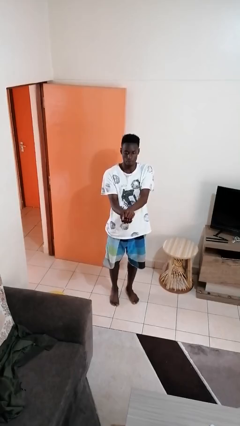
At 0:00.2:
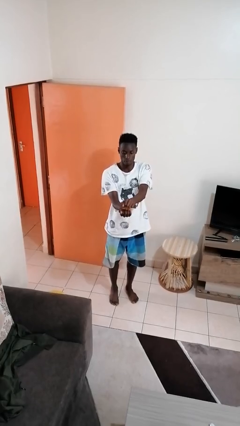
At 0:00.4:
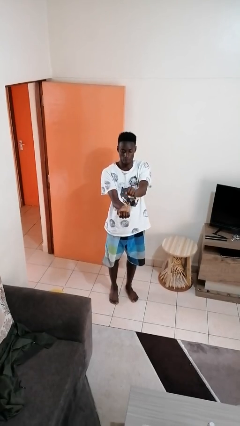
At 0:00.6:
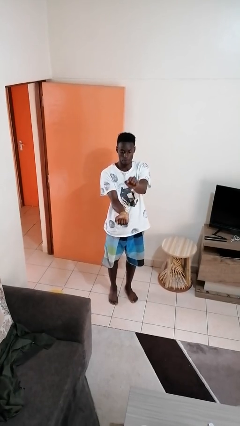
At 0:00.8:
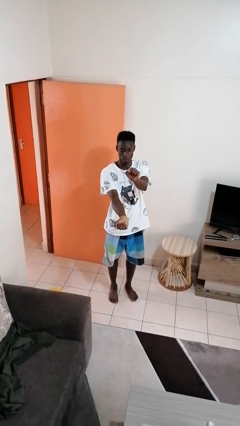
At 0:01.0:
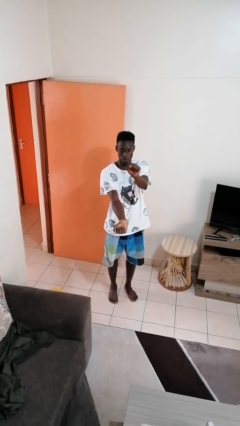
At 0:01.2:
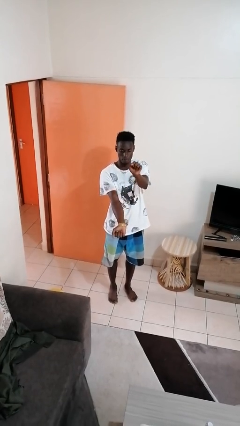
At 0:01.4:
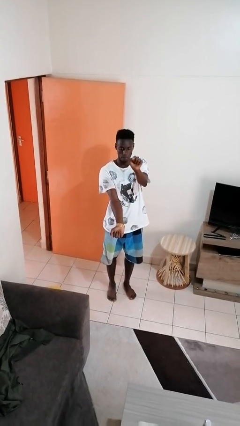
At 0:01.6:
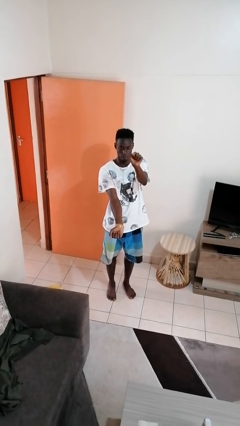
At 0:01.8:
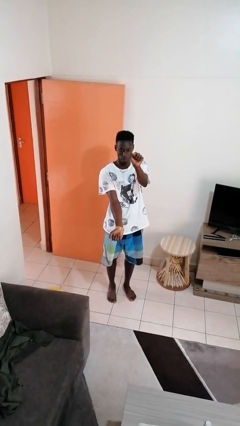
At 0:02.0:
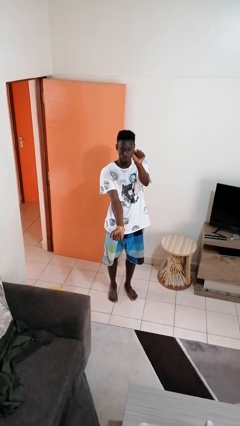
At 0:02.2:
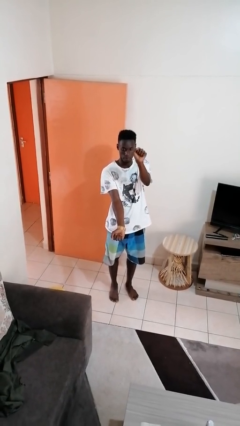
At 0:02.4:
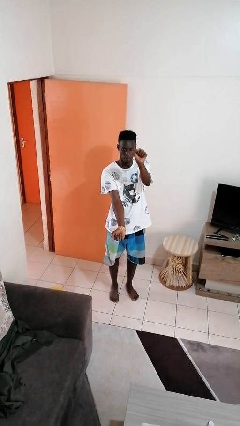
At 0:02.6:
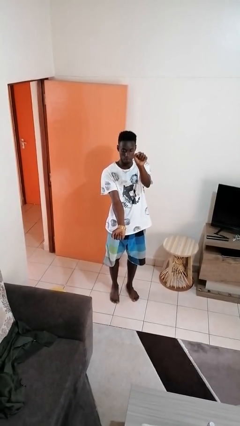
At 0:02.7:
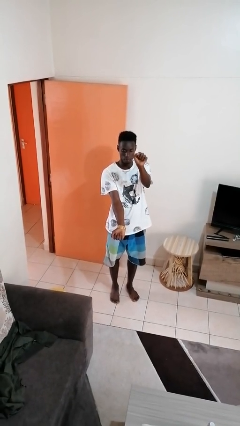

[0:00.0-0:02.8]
person gestures zoom in

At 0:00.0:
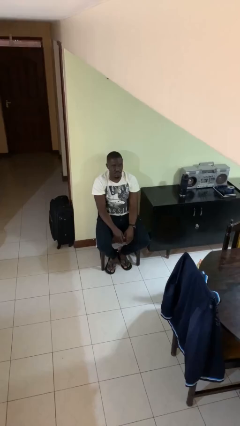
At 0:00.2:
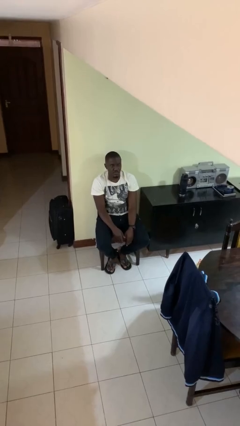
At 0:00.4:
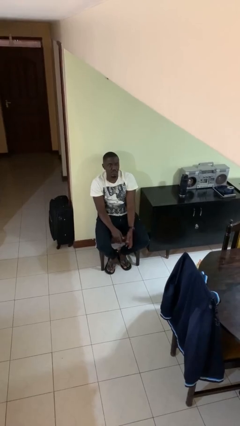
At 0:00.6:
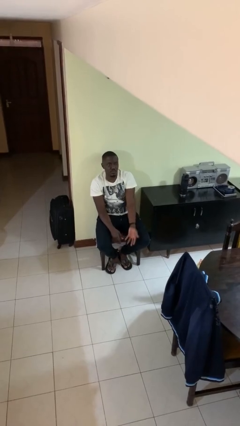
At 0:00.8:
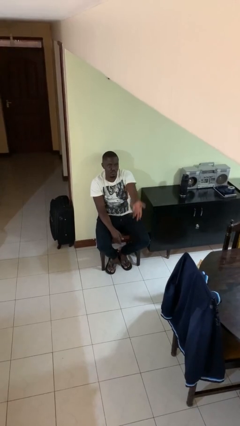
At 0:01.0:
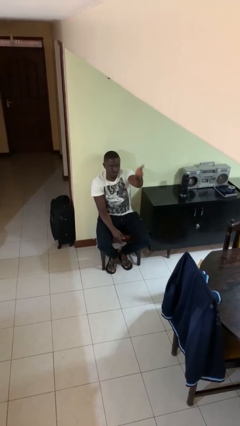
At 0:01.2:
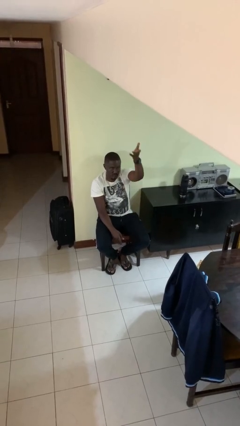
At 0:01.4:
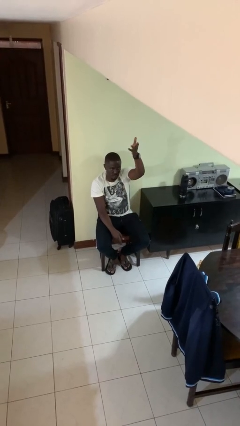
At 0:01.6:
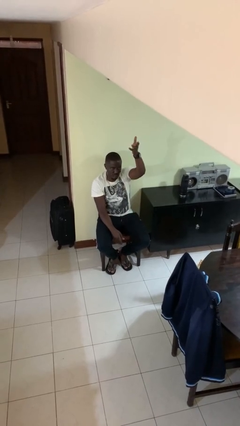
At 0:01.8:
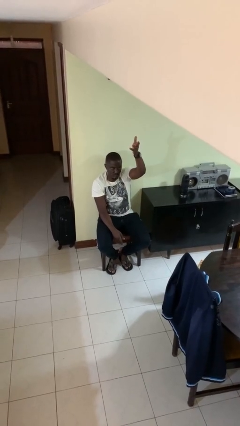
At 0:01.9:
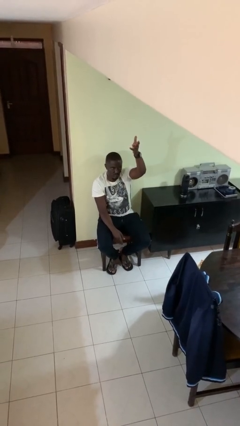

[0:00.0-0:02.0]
person gestures swipe up

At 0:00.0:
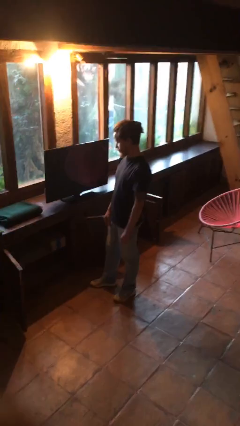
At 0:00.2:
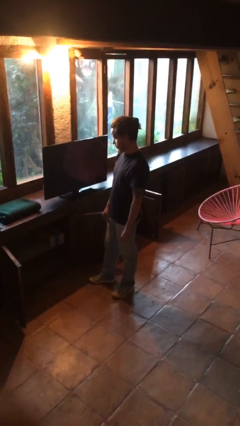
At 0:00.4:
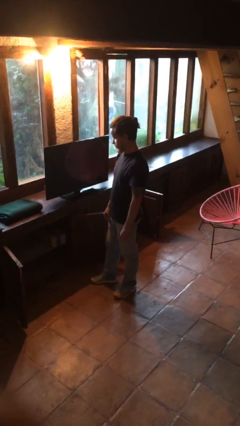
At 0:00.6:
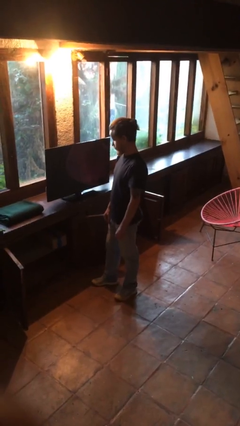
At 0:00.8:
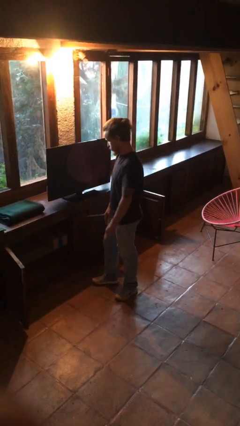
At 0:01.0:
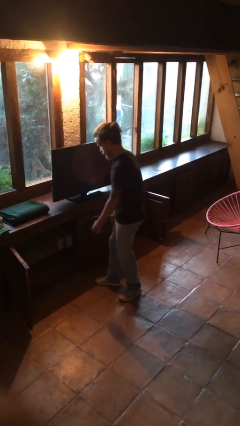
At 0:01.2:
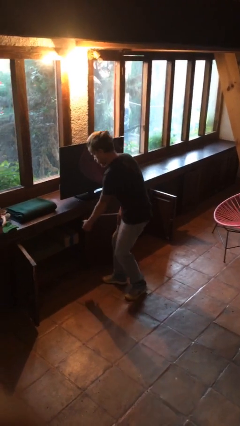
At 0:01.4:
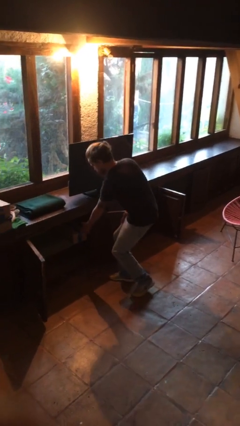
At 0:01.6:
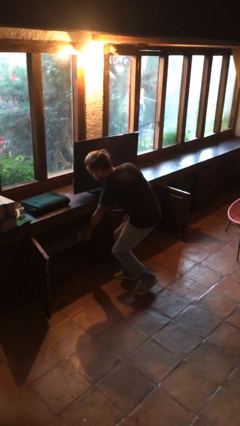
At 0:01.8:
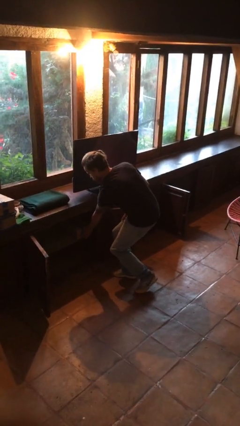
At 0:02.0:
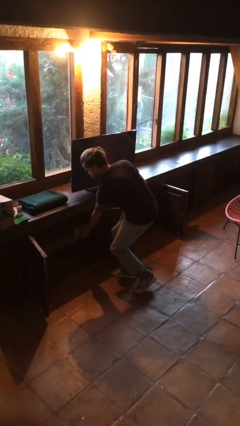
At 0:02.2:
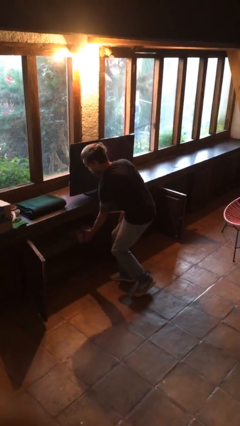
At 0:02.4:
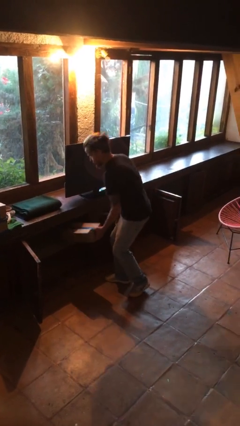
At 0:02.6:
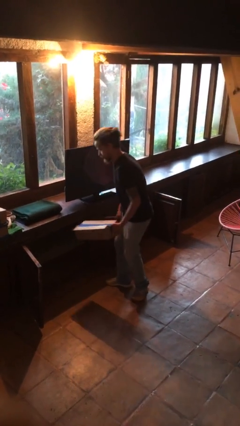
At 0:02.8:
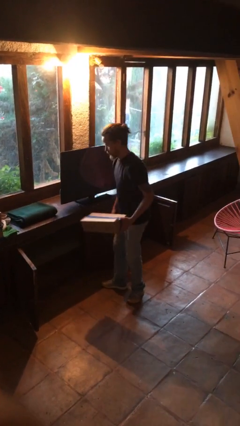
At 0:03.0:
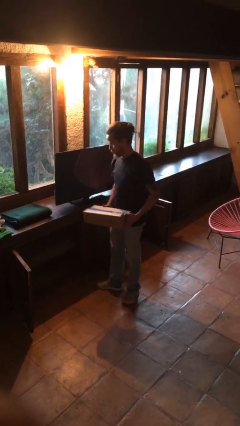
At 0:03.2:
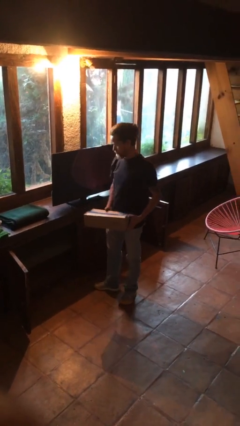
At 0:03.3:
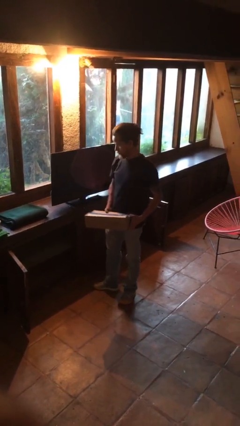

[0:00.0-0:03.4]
person picks up object from cabinet

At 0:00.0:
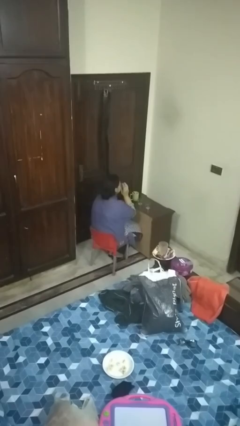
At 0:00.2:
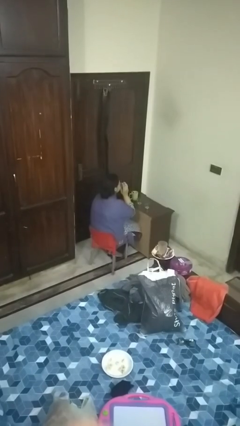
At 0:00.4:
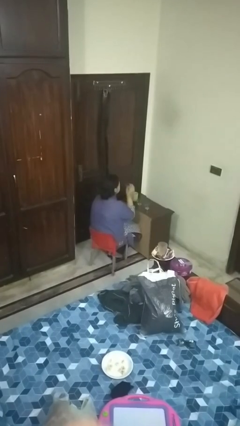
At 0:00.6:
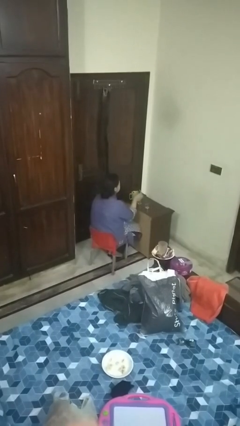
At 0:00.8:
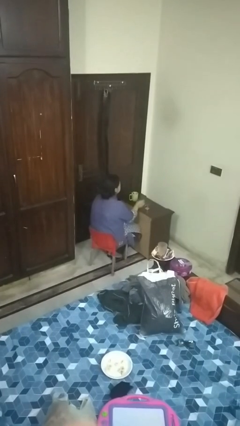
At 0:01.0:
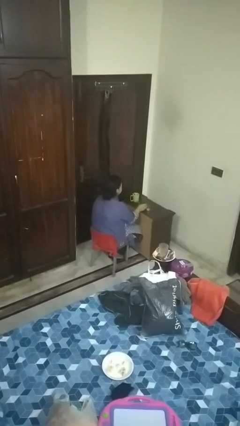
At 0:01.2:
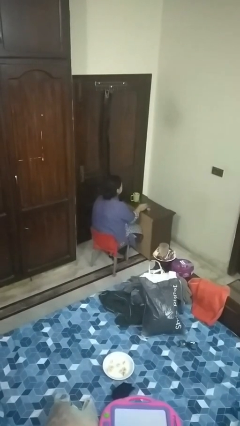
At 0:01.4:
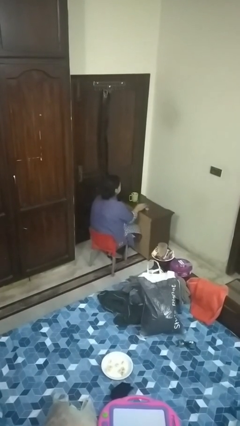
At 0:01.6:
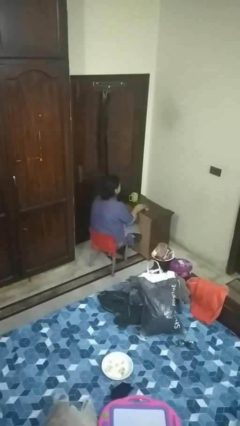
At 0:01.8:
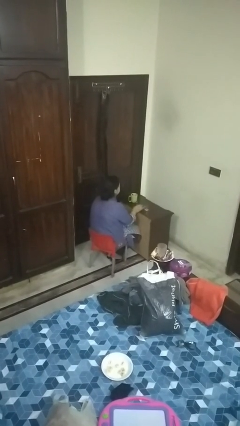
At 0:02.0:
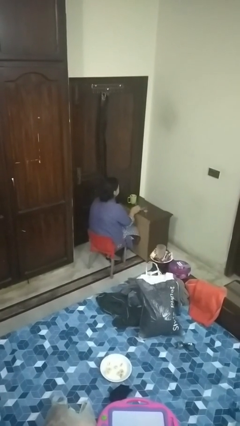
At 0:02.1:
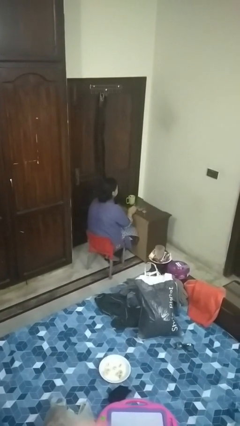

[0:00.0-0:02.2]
person puts down object on table

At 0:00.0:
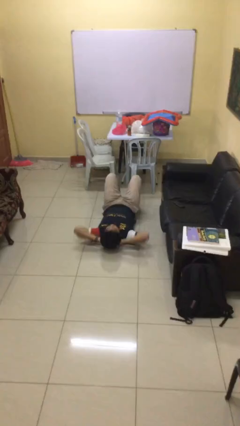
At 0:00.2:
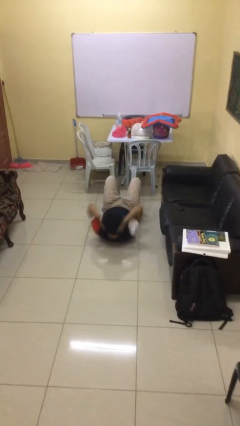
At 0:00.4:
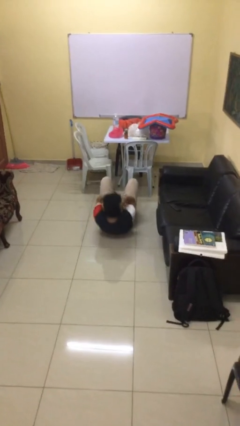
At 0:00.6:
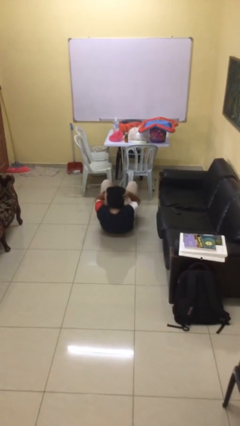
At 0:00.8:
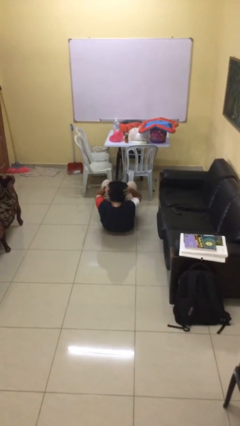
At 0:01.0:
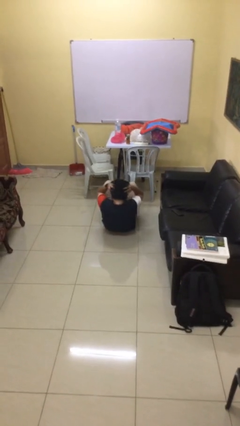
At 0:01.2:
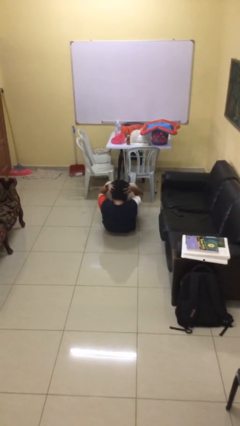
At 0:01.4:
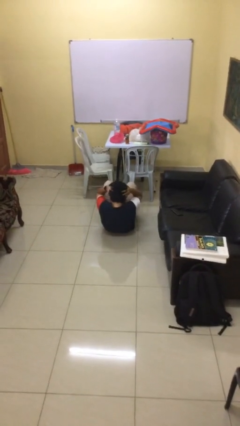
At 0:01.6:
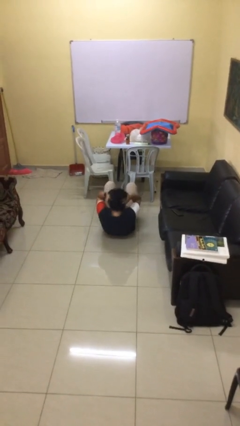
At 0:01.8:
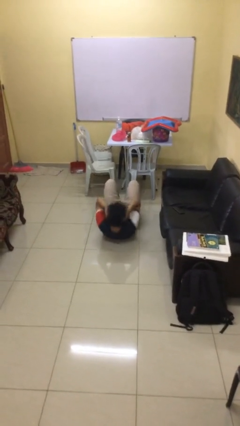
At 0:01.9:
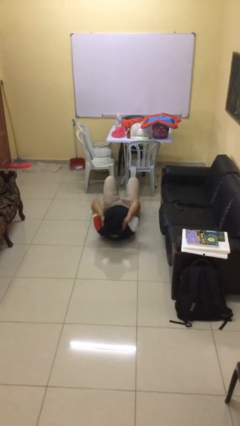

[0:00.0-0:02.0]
person exercises with situp

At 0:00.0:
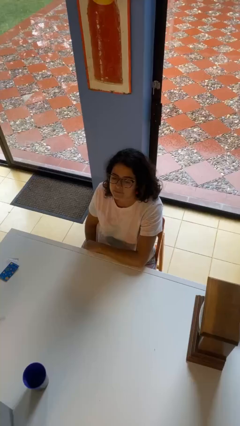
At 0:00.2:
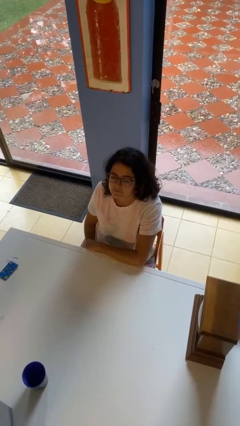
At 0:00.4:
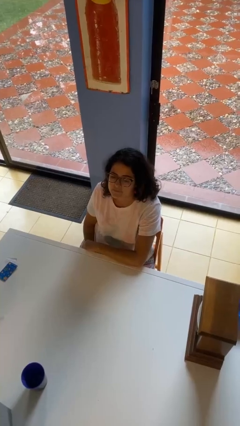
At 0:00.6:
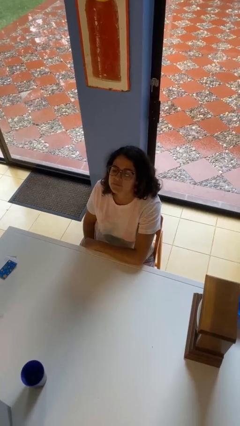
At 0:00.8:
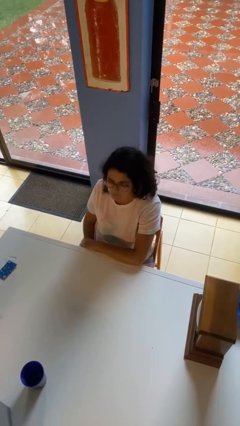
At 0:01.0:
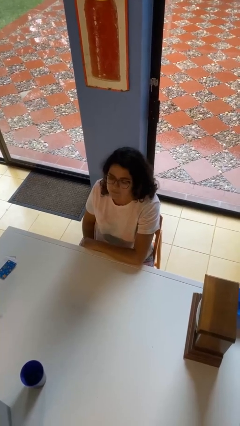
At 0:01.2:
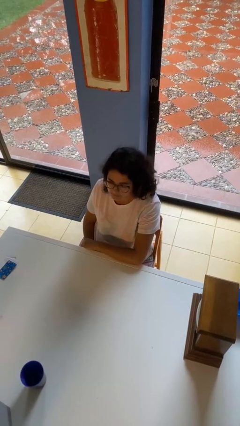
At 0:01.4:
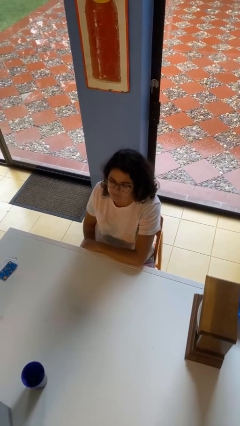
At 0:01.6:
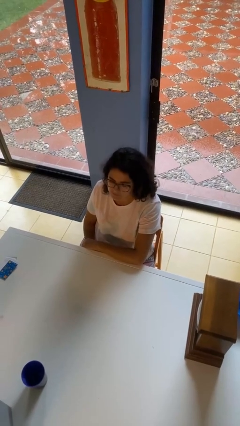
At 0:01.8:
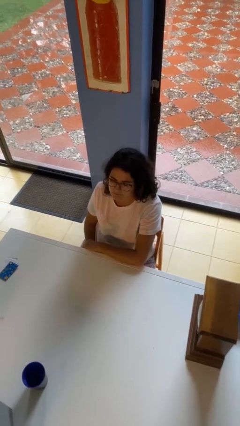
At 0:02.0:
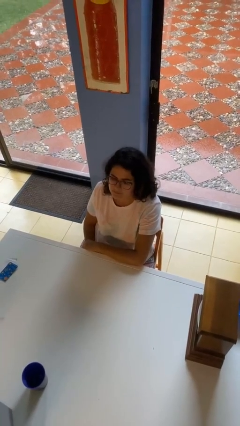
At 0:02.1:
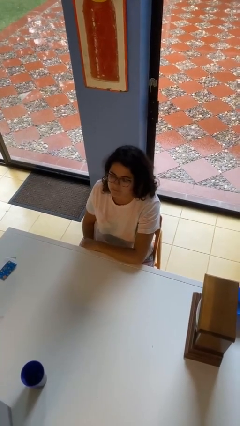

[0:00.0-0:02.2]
person nods head

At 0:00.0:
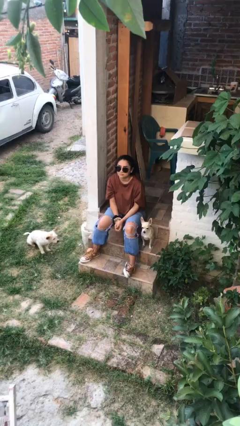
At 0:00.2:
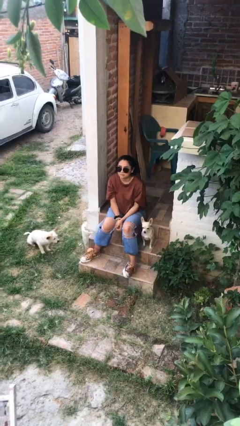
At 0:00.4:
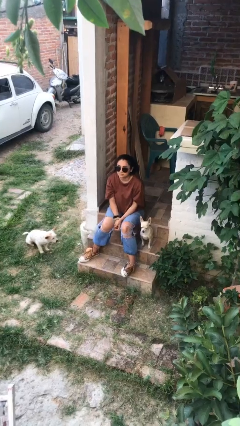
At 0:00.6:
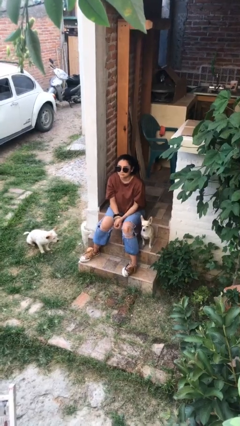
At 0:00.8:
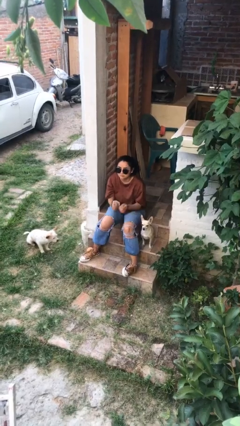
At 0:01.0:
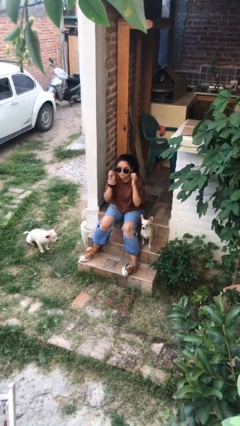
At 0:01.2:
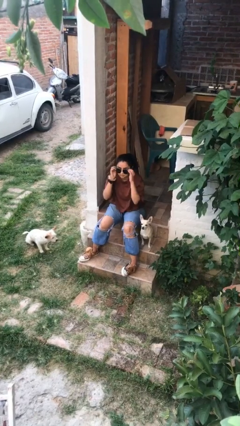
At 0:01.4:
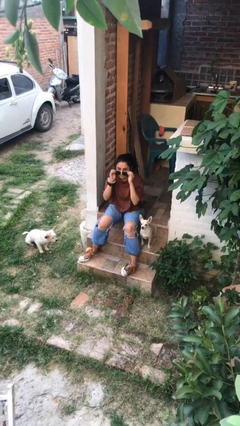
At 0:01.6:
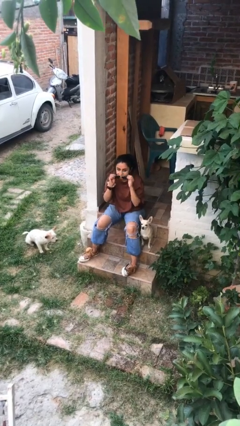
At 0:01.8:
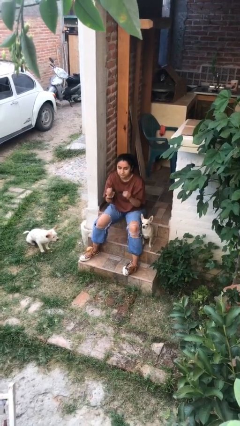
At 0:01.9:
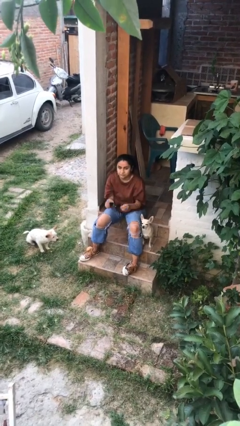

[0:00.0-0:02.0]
person takes off sunglasses

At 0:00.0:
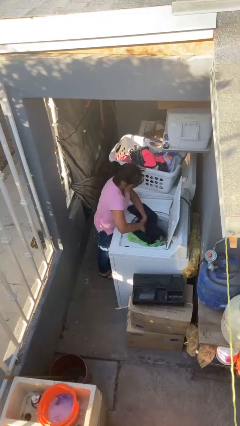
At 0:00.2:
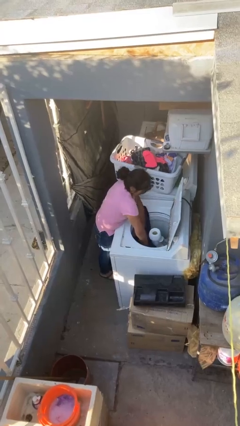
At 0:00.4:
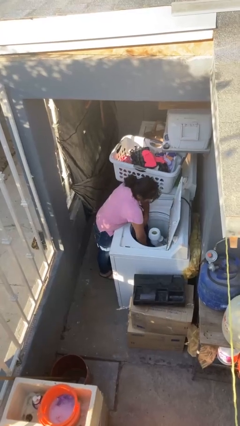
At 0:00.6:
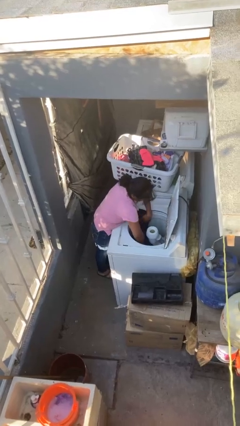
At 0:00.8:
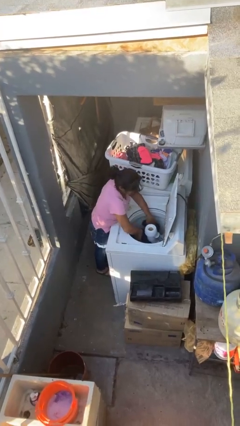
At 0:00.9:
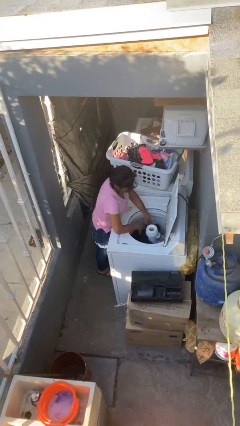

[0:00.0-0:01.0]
person unloads clotheswasher
